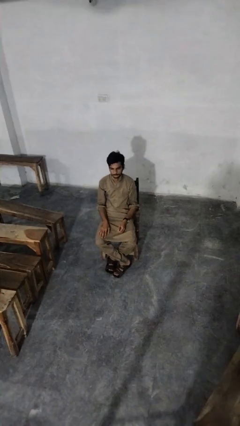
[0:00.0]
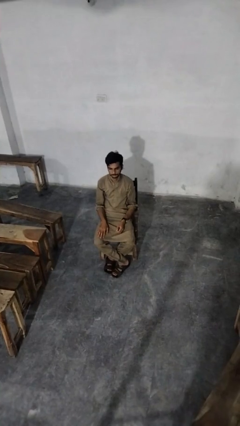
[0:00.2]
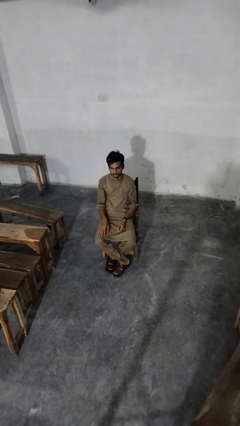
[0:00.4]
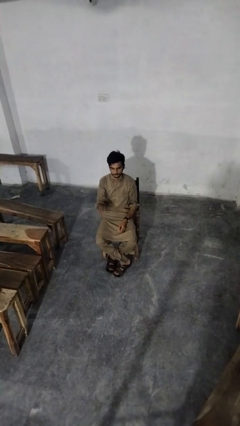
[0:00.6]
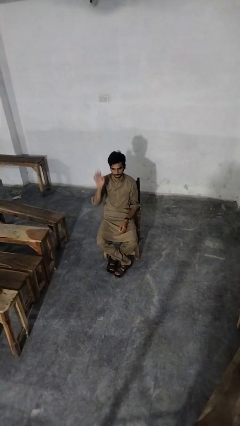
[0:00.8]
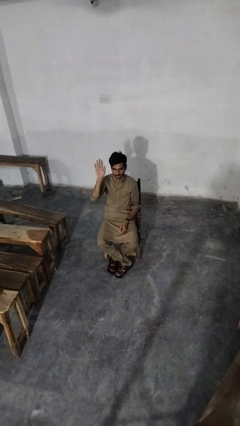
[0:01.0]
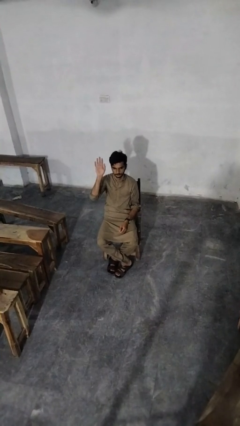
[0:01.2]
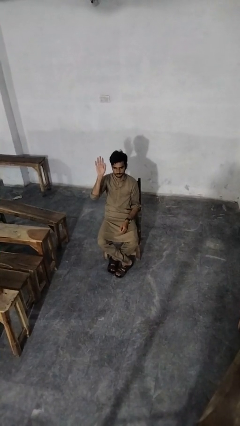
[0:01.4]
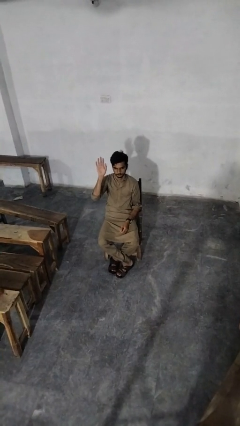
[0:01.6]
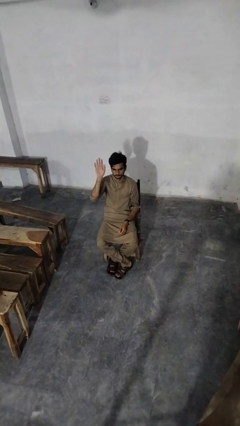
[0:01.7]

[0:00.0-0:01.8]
person gestures raise hand

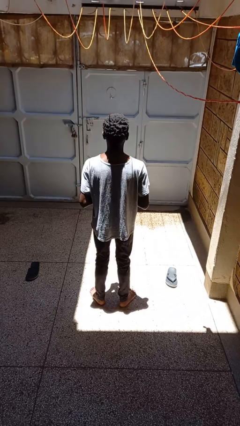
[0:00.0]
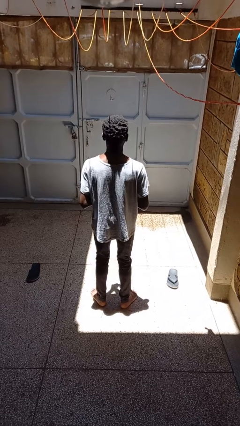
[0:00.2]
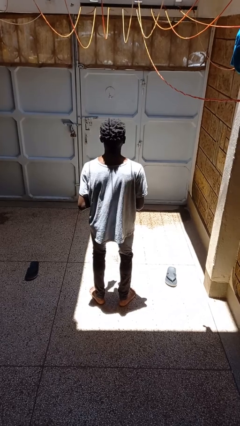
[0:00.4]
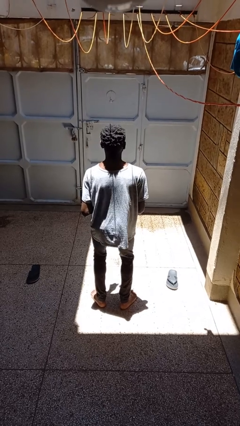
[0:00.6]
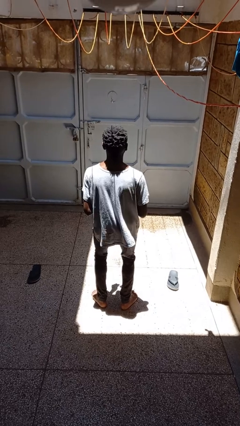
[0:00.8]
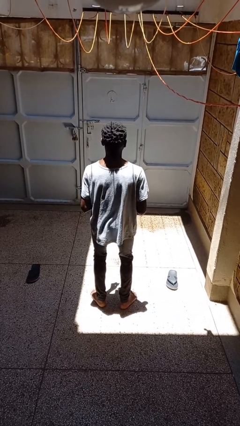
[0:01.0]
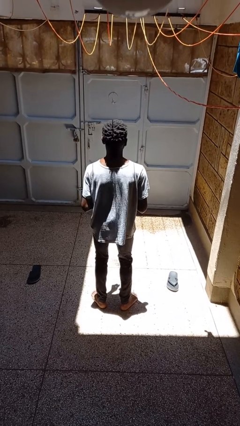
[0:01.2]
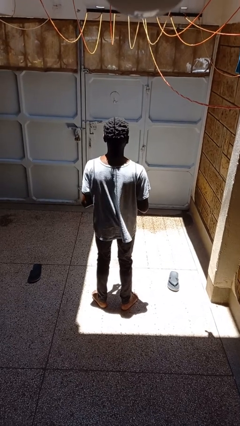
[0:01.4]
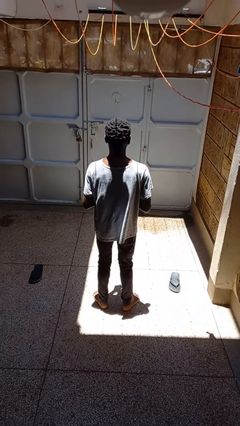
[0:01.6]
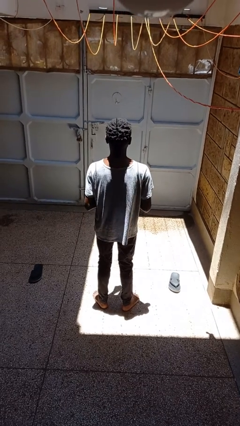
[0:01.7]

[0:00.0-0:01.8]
person dances in place

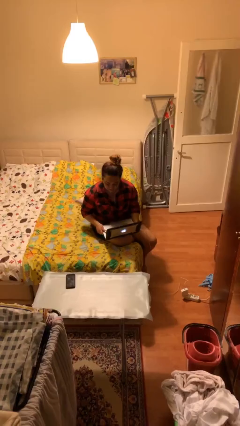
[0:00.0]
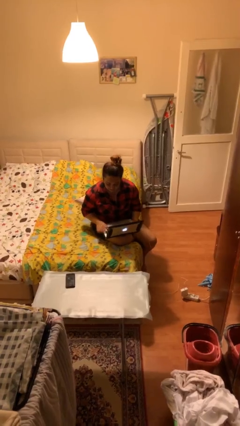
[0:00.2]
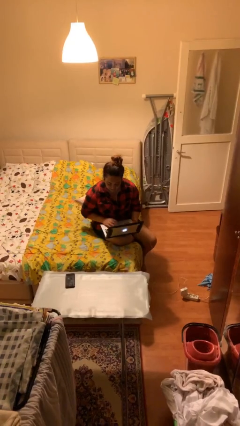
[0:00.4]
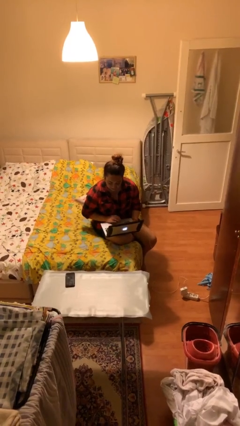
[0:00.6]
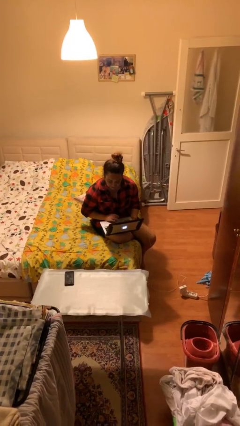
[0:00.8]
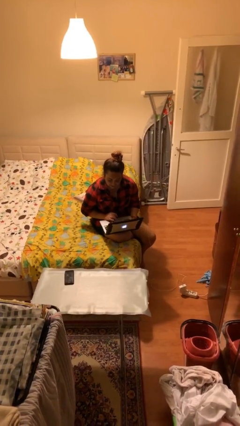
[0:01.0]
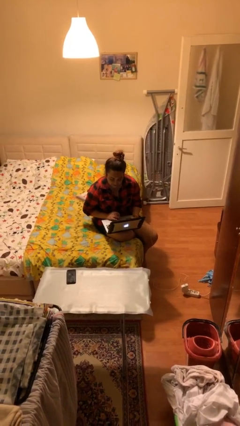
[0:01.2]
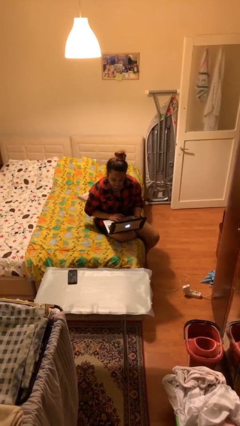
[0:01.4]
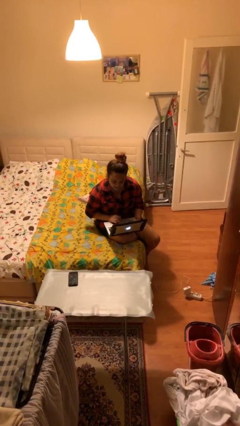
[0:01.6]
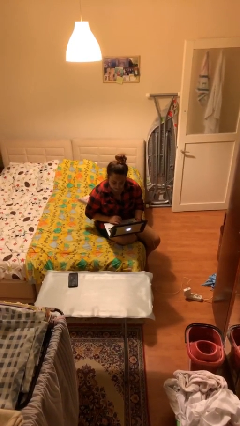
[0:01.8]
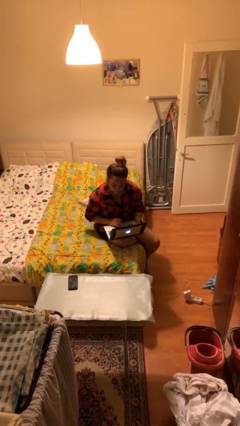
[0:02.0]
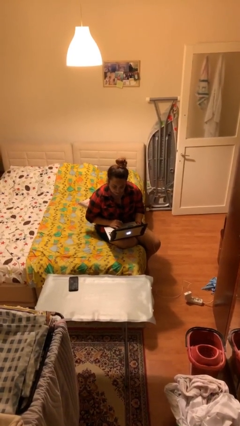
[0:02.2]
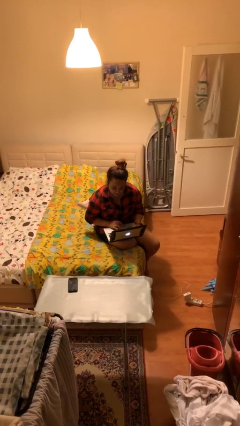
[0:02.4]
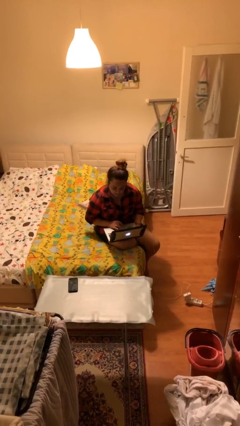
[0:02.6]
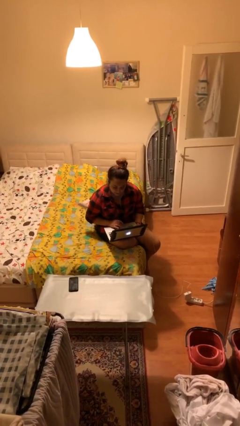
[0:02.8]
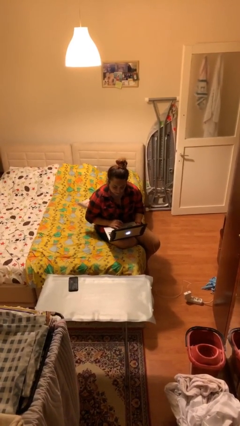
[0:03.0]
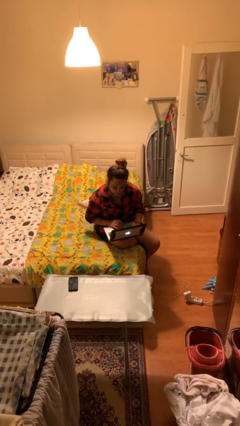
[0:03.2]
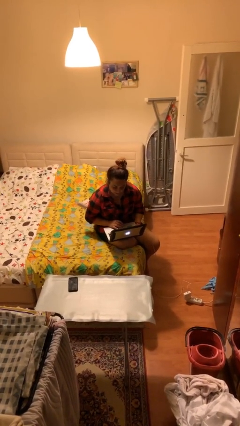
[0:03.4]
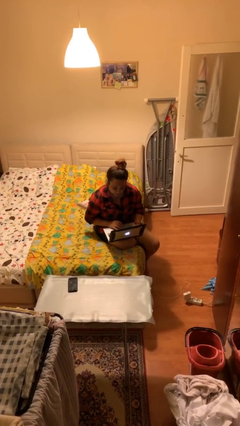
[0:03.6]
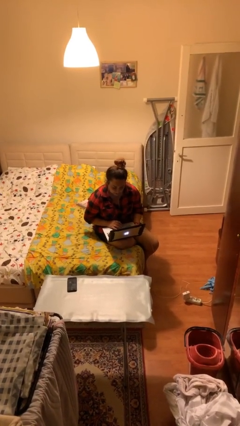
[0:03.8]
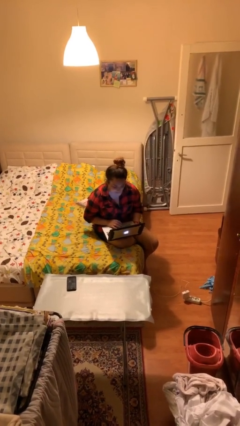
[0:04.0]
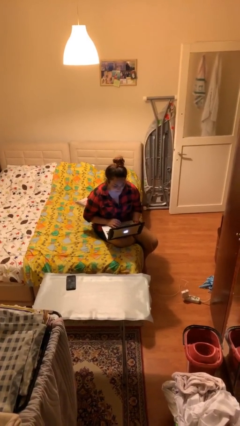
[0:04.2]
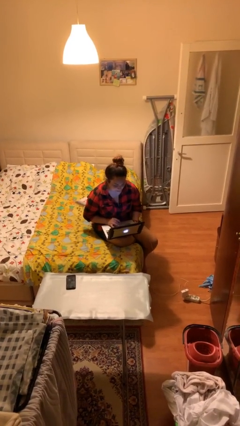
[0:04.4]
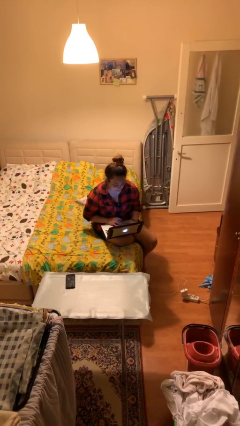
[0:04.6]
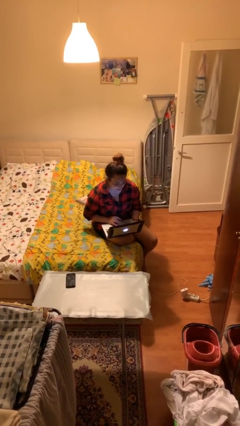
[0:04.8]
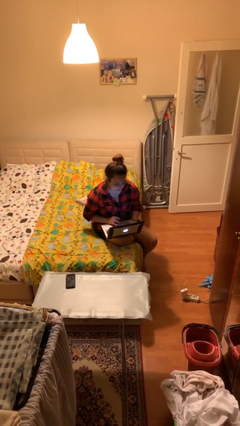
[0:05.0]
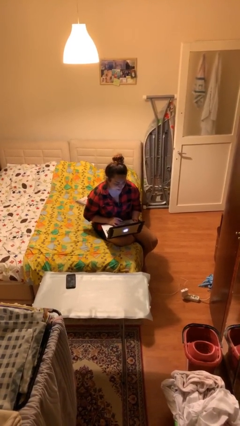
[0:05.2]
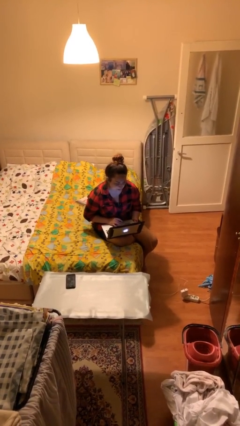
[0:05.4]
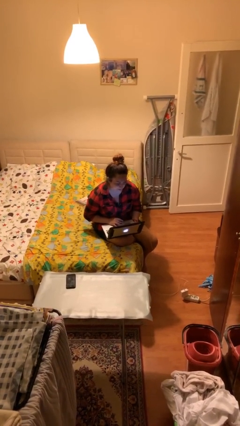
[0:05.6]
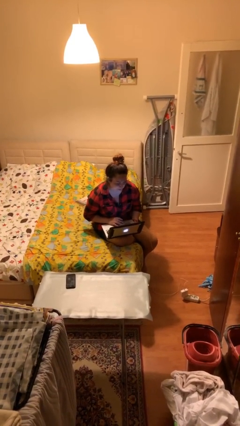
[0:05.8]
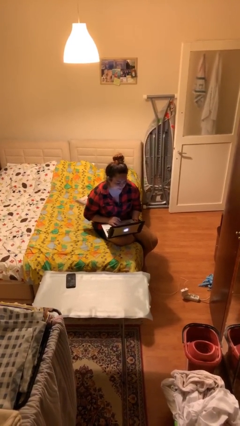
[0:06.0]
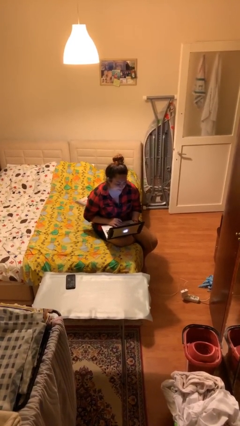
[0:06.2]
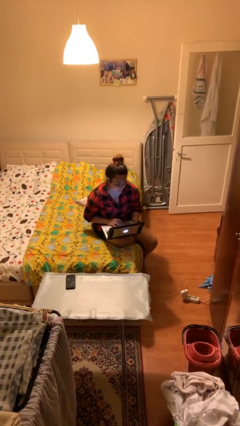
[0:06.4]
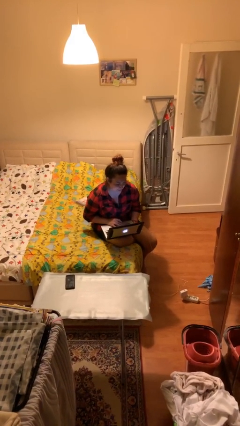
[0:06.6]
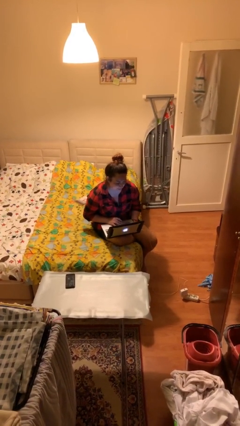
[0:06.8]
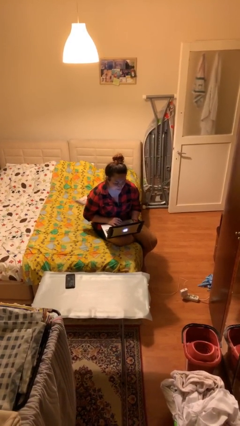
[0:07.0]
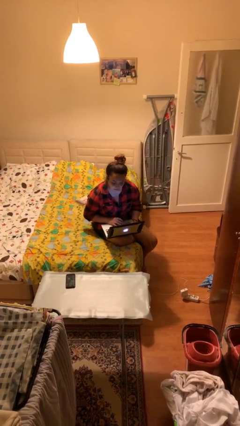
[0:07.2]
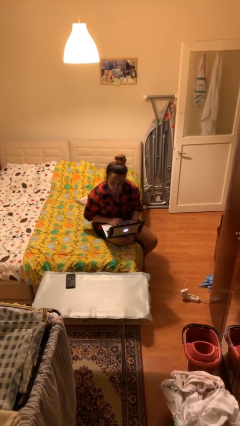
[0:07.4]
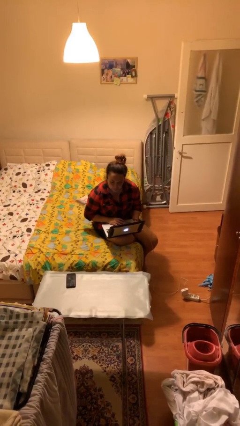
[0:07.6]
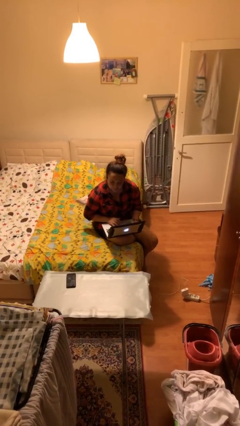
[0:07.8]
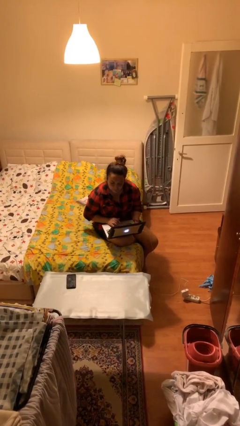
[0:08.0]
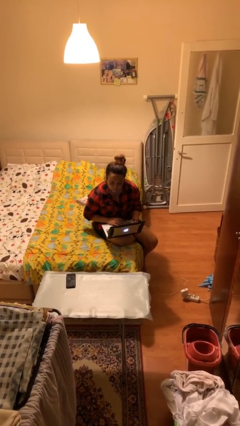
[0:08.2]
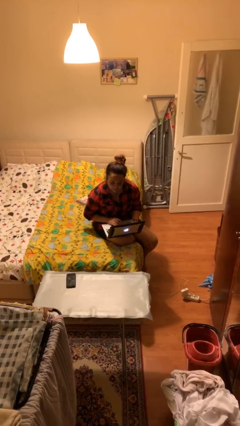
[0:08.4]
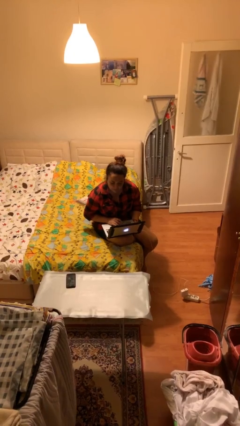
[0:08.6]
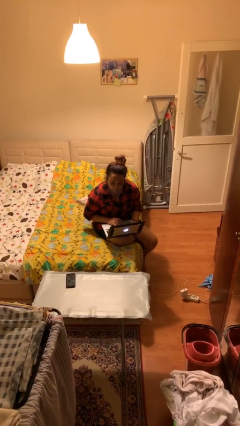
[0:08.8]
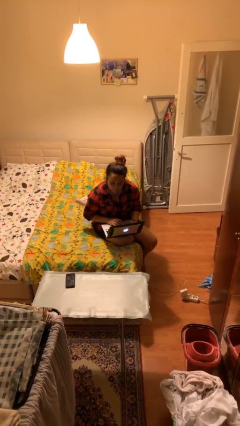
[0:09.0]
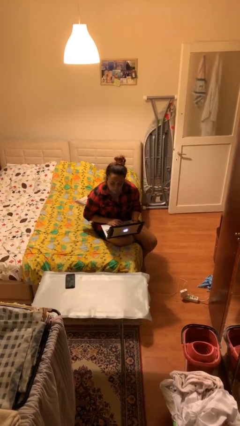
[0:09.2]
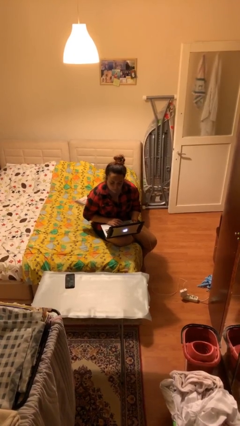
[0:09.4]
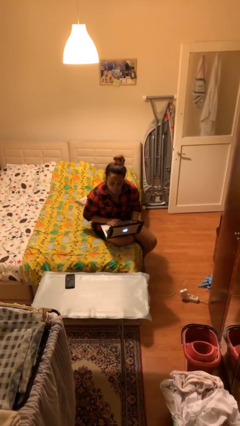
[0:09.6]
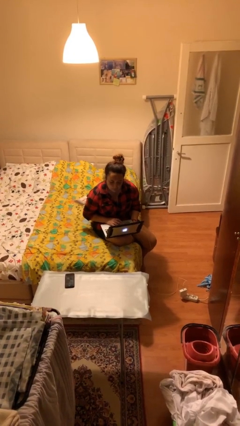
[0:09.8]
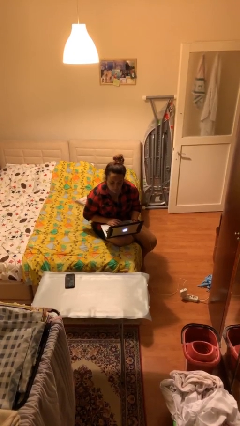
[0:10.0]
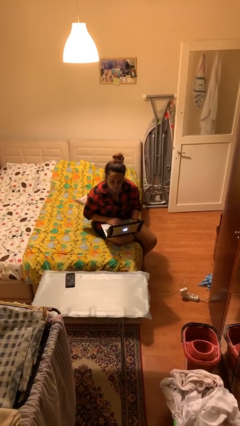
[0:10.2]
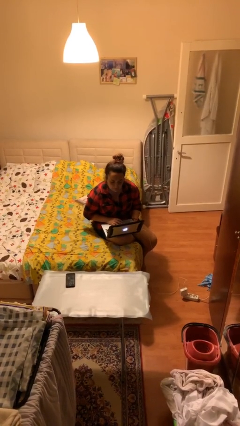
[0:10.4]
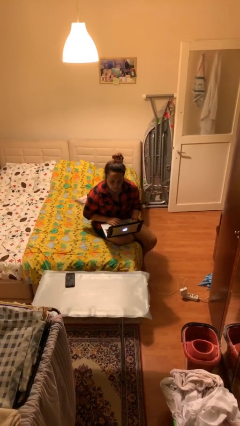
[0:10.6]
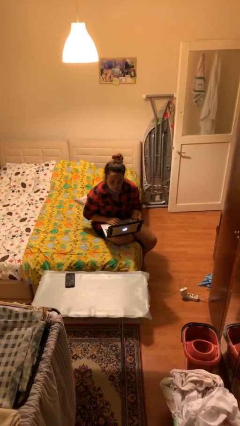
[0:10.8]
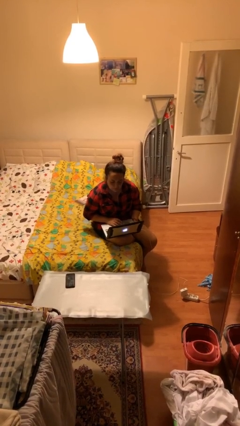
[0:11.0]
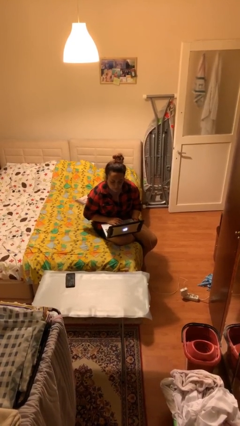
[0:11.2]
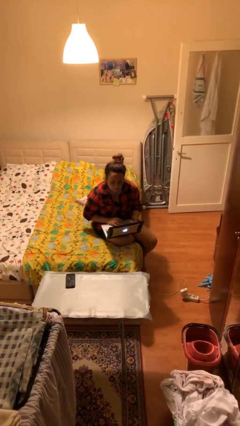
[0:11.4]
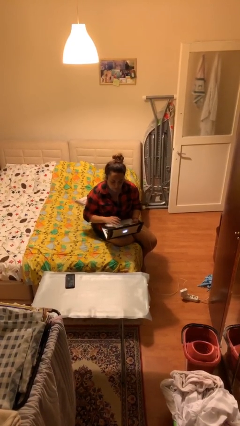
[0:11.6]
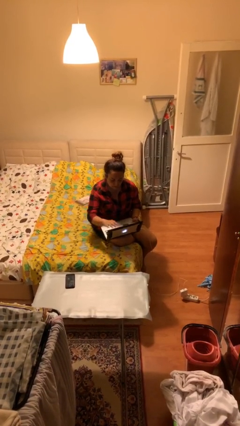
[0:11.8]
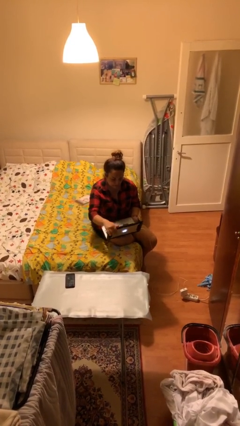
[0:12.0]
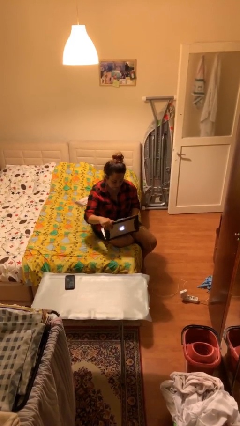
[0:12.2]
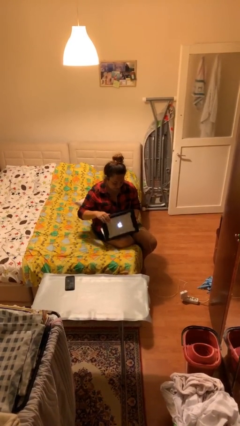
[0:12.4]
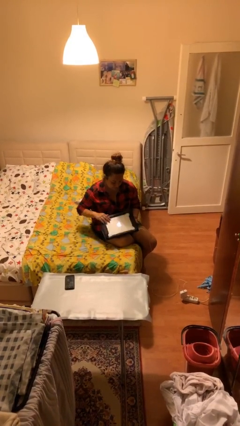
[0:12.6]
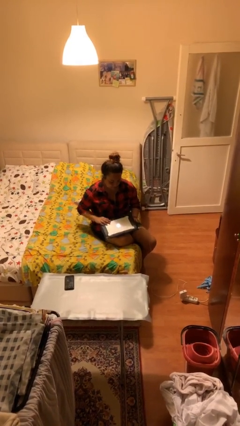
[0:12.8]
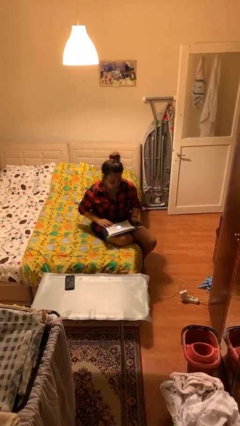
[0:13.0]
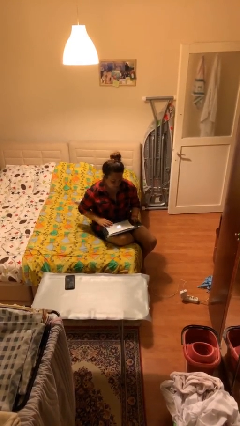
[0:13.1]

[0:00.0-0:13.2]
person interacts with laptop

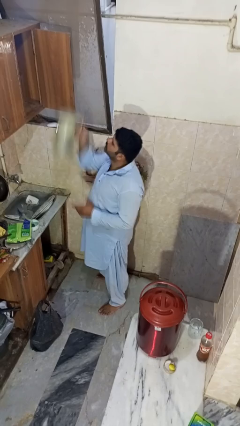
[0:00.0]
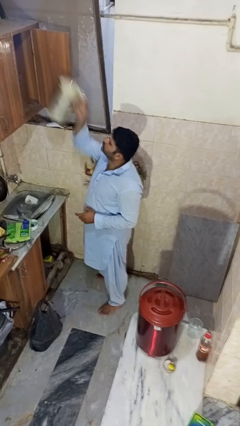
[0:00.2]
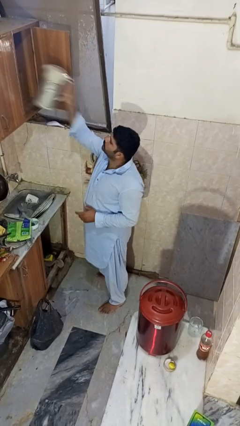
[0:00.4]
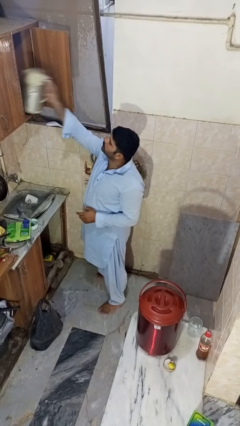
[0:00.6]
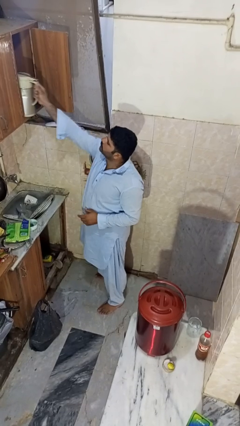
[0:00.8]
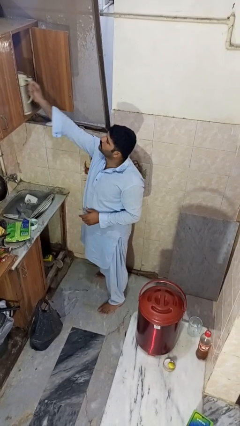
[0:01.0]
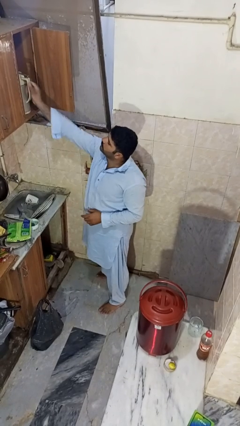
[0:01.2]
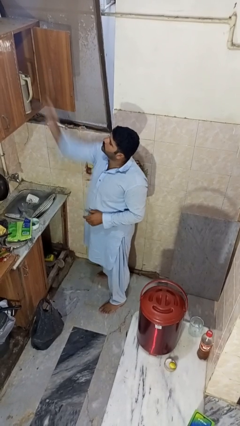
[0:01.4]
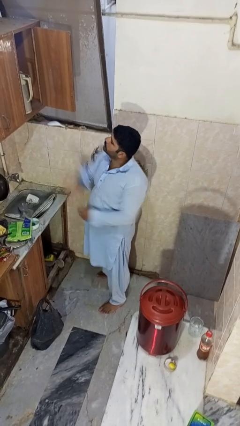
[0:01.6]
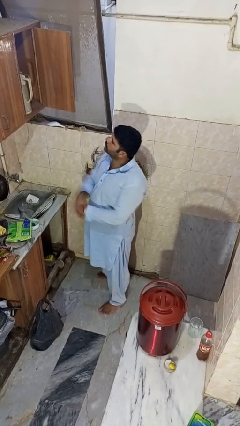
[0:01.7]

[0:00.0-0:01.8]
person puts object in cabinet
